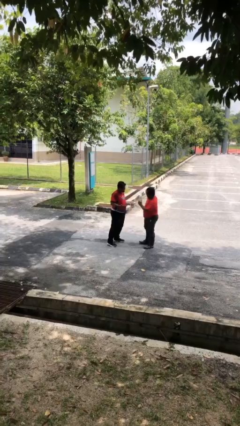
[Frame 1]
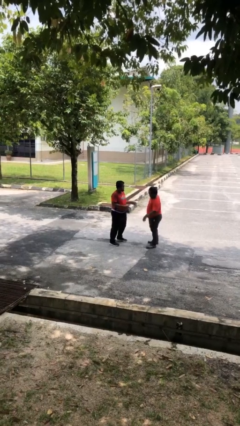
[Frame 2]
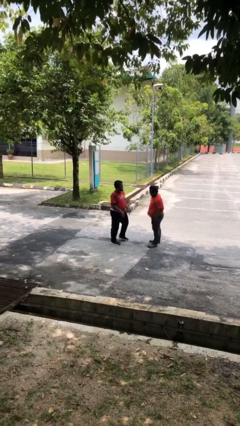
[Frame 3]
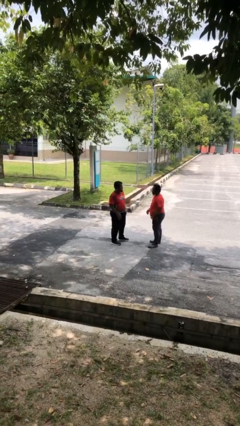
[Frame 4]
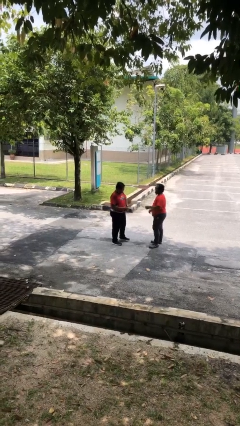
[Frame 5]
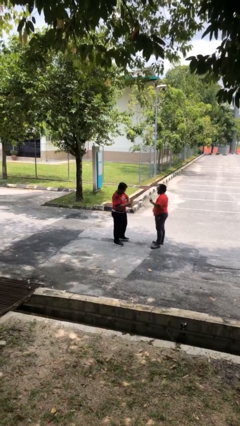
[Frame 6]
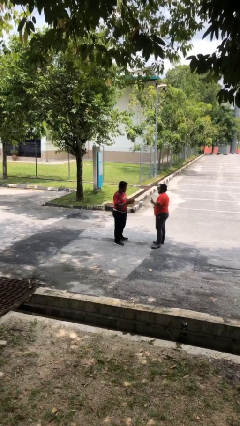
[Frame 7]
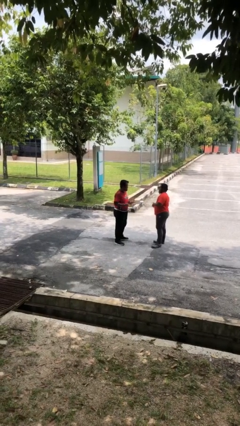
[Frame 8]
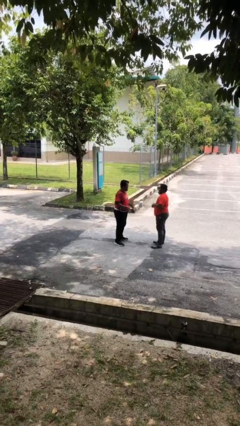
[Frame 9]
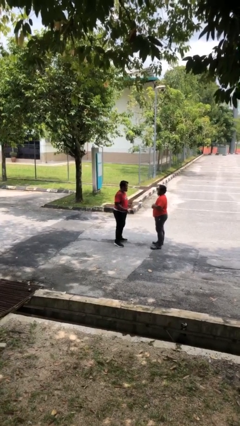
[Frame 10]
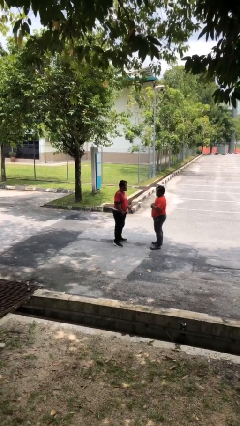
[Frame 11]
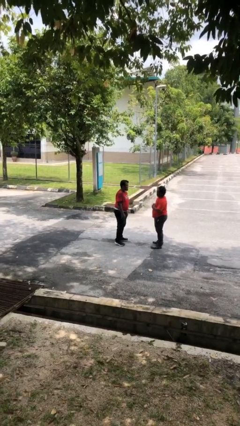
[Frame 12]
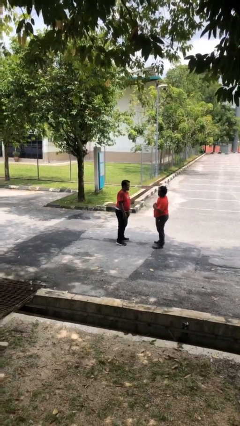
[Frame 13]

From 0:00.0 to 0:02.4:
person talks to person

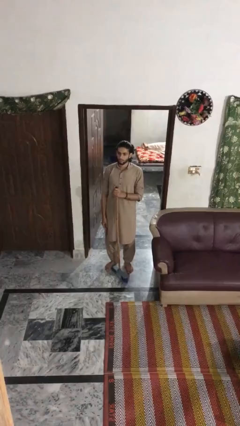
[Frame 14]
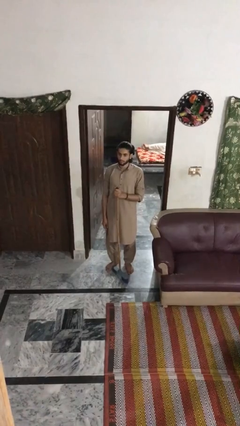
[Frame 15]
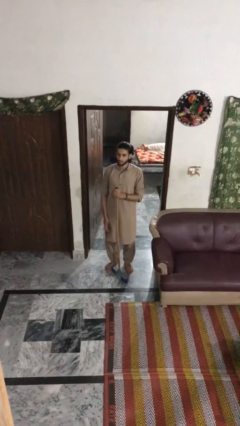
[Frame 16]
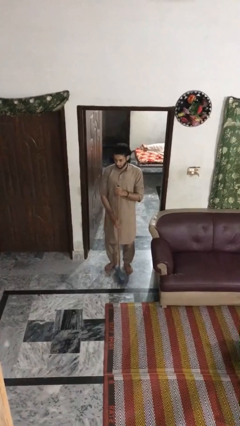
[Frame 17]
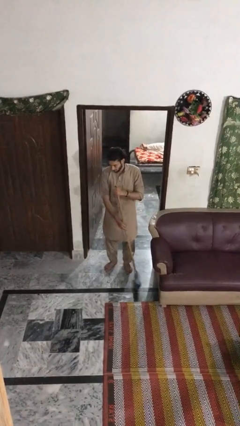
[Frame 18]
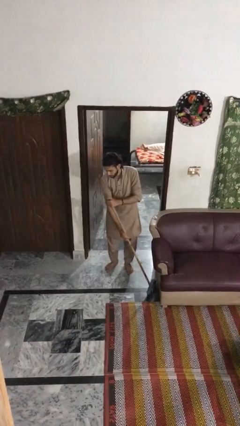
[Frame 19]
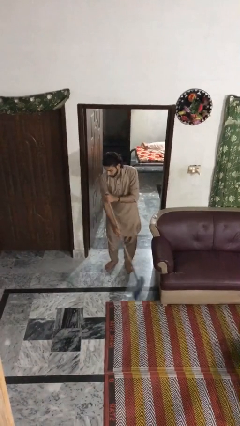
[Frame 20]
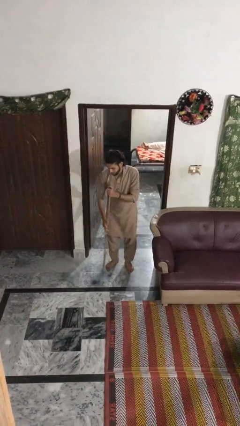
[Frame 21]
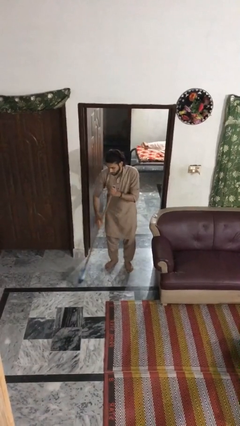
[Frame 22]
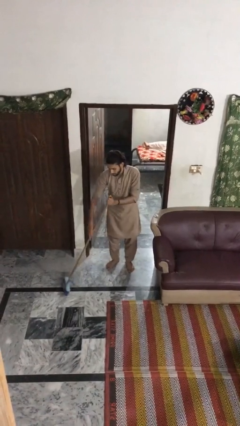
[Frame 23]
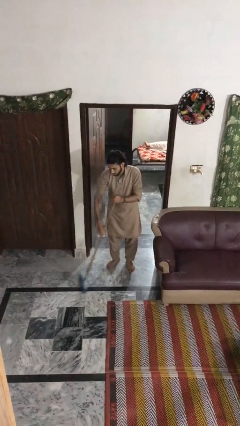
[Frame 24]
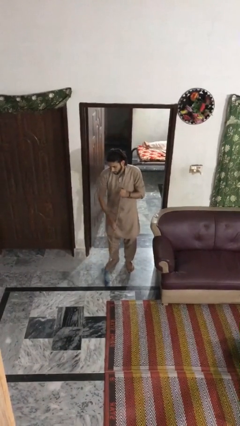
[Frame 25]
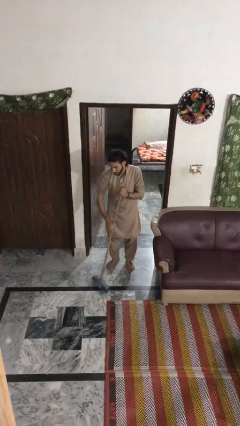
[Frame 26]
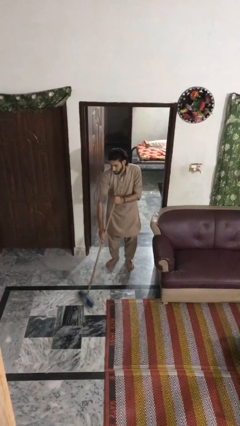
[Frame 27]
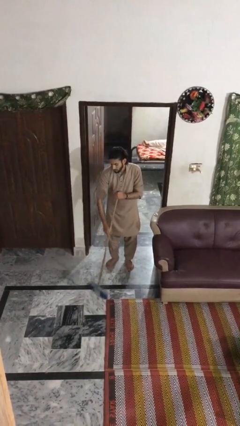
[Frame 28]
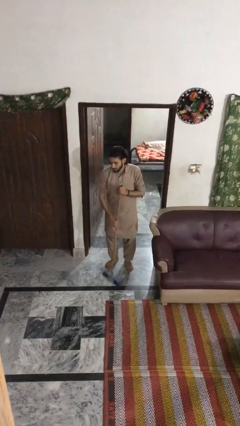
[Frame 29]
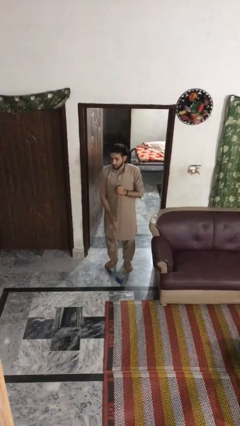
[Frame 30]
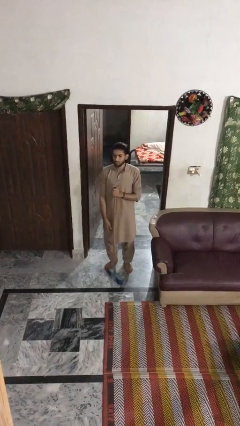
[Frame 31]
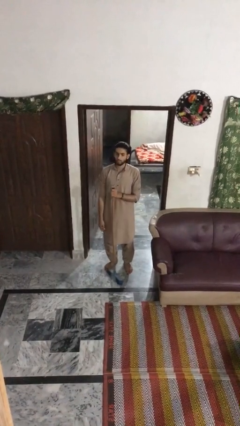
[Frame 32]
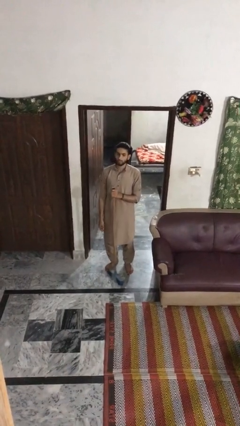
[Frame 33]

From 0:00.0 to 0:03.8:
person sweeps floor

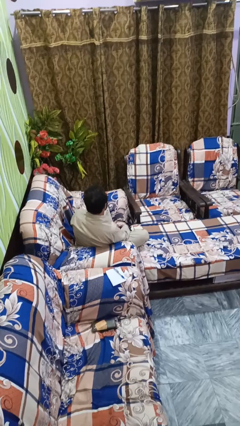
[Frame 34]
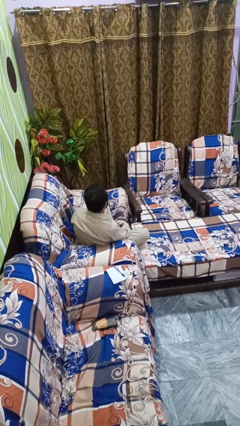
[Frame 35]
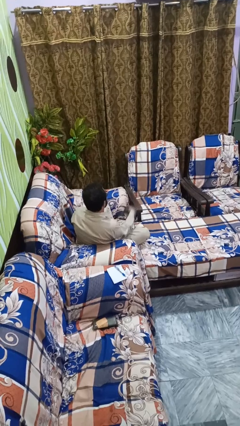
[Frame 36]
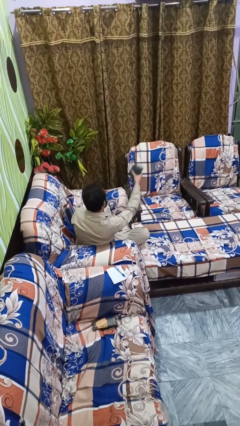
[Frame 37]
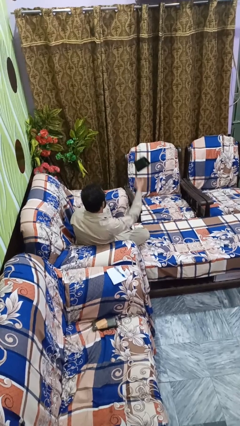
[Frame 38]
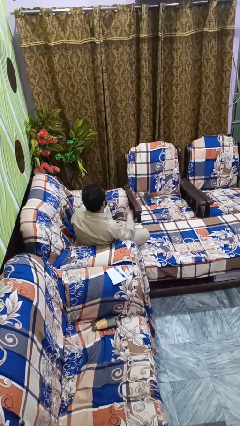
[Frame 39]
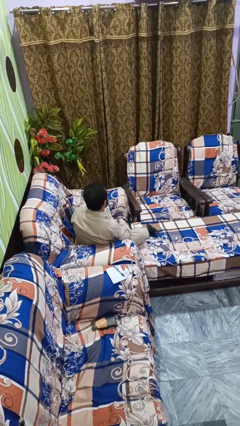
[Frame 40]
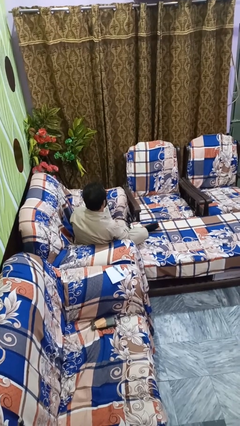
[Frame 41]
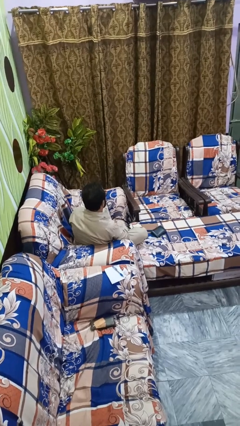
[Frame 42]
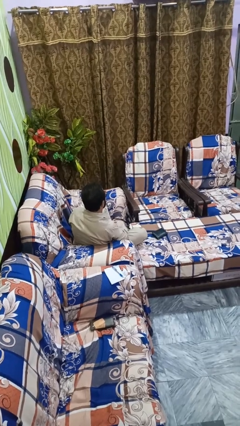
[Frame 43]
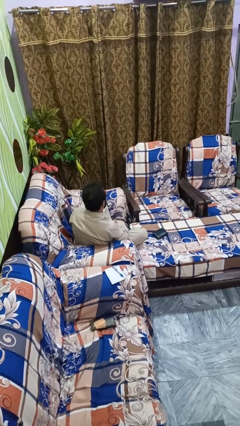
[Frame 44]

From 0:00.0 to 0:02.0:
person throws object into air

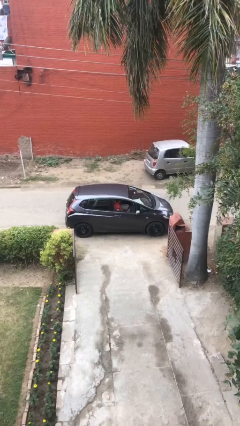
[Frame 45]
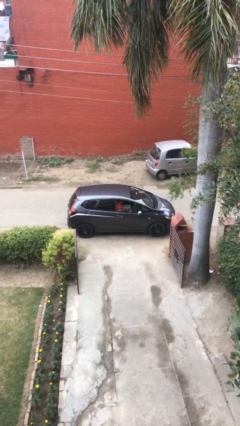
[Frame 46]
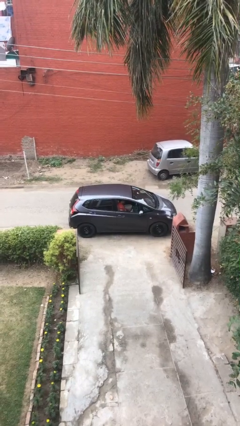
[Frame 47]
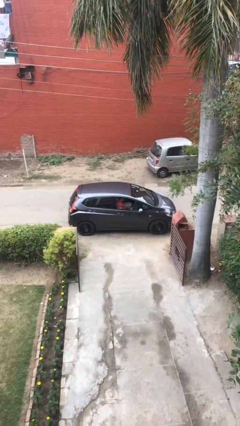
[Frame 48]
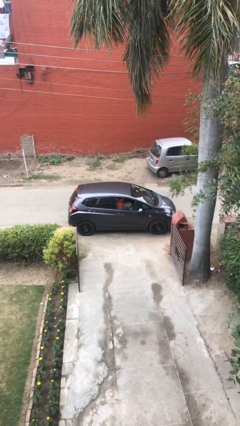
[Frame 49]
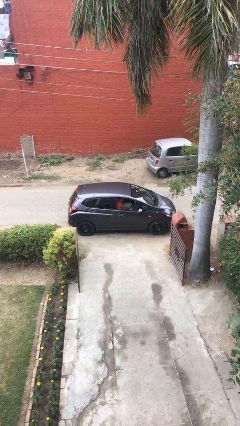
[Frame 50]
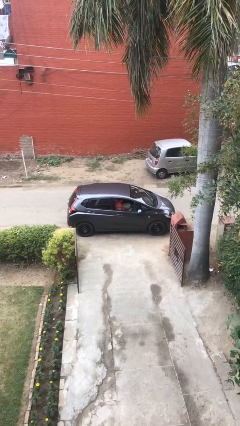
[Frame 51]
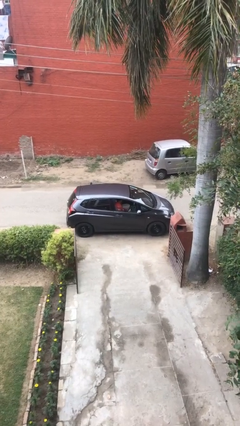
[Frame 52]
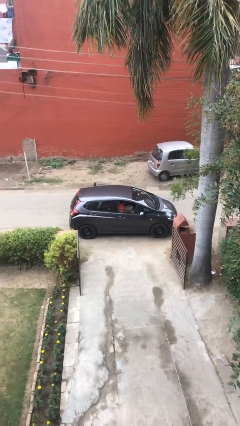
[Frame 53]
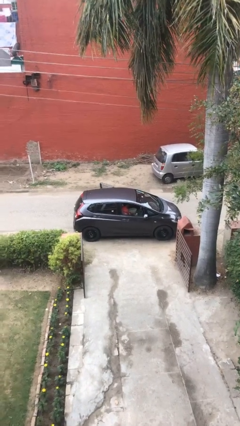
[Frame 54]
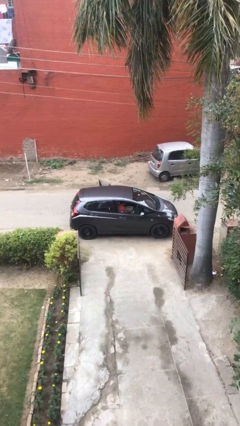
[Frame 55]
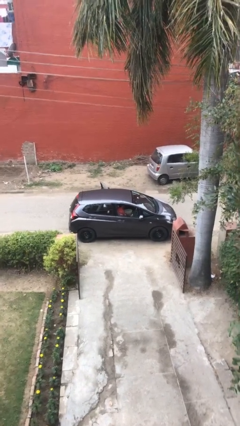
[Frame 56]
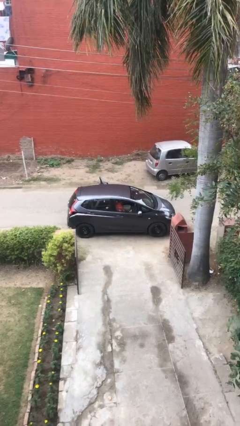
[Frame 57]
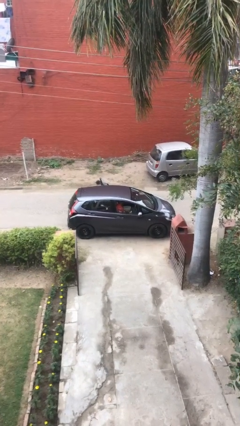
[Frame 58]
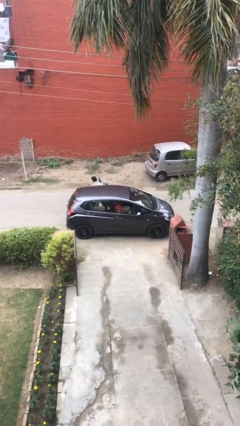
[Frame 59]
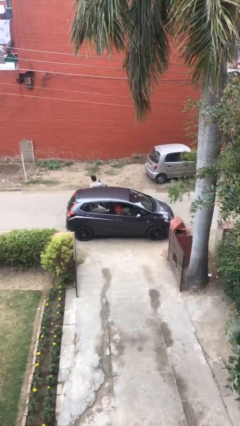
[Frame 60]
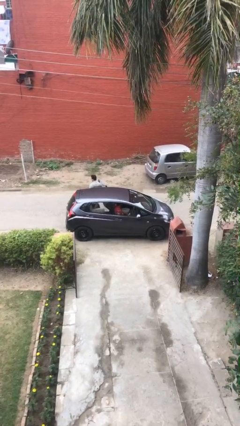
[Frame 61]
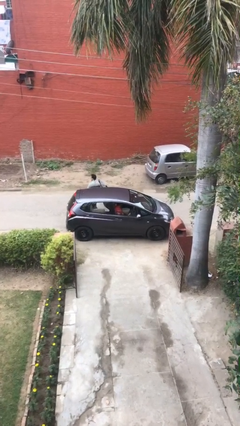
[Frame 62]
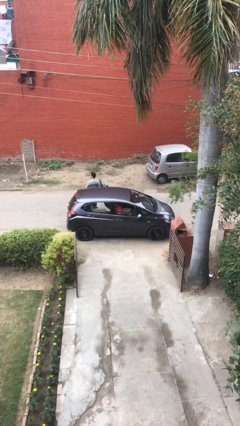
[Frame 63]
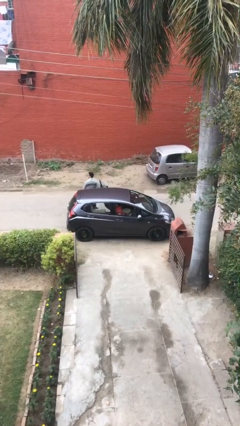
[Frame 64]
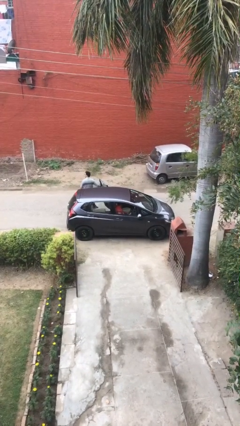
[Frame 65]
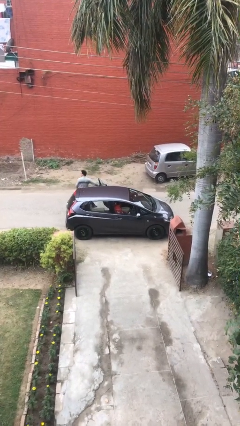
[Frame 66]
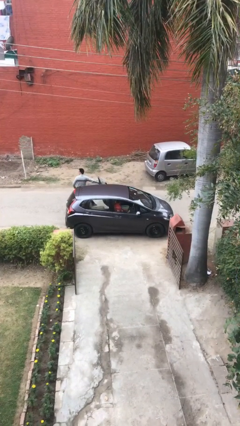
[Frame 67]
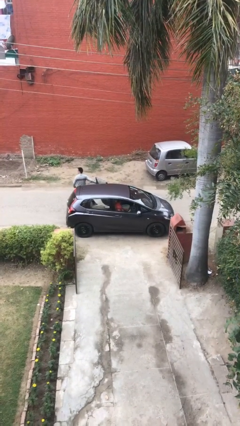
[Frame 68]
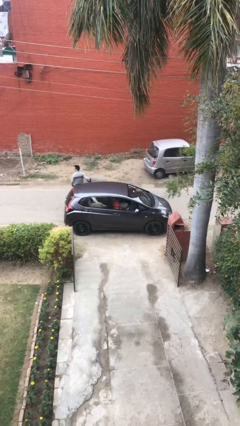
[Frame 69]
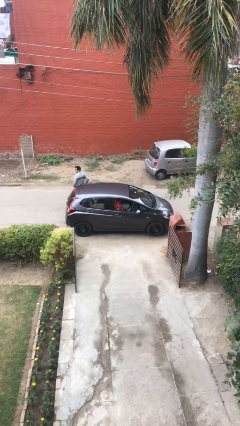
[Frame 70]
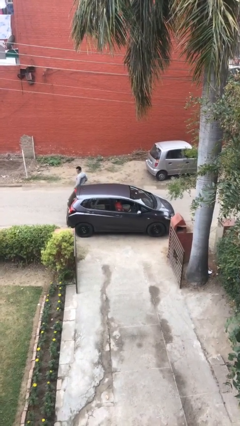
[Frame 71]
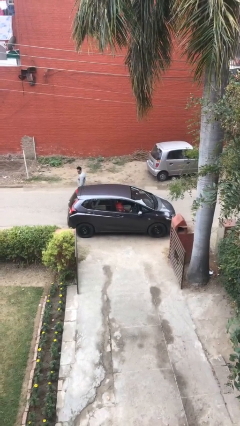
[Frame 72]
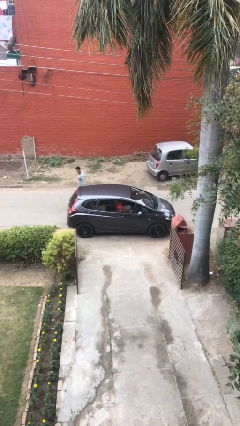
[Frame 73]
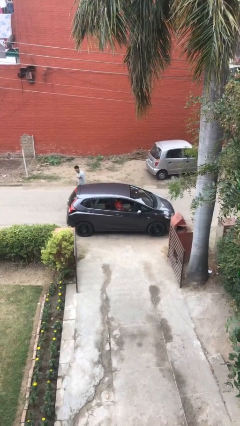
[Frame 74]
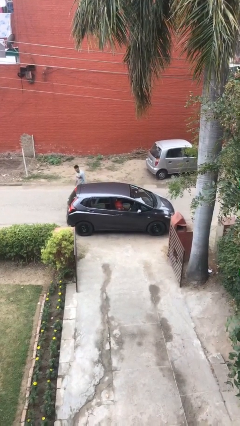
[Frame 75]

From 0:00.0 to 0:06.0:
car drops off person

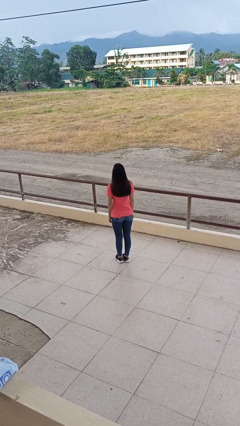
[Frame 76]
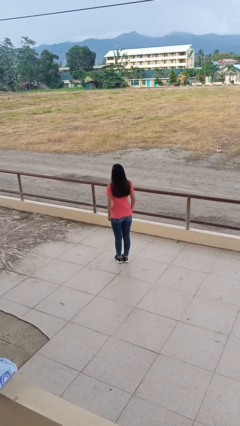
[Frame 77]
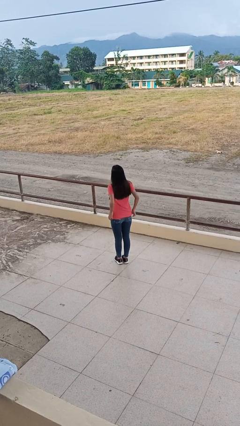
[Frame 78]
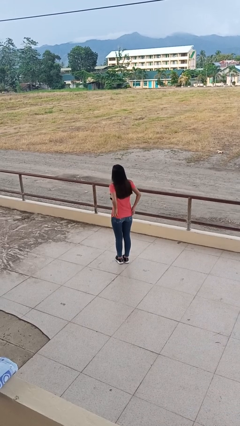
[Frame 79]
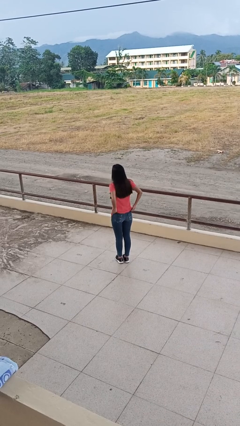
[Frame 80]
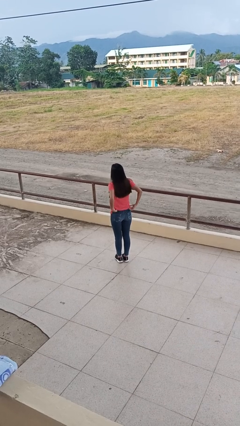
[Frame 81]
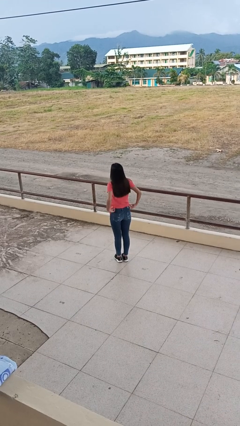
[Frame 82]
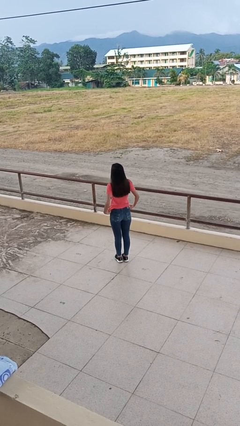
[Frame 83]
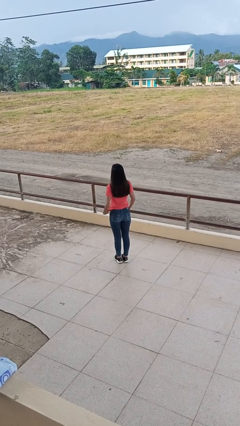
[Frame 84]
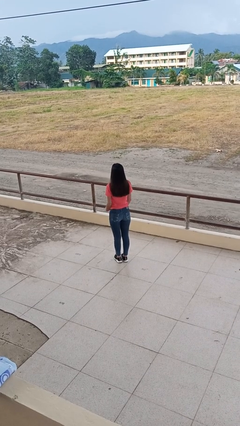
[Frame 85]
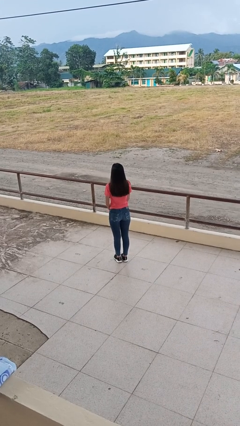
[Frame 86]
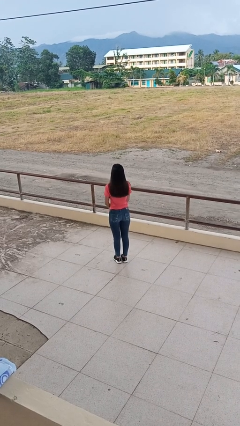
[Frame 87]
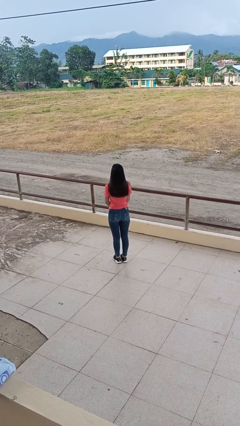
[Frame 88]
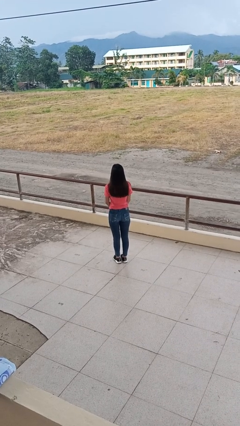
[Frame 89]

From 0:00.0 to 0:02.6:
person tucks in shirt

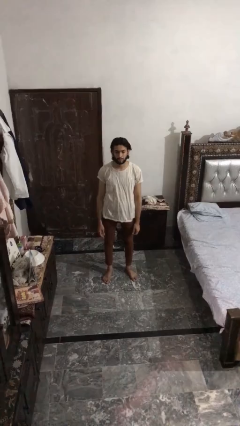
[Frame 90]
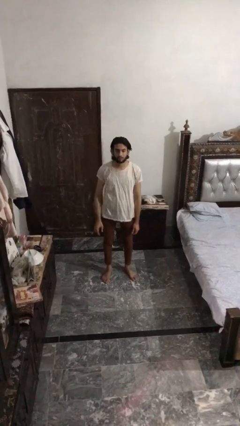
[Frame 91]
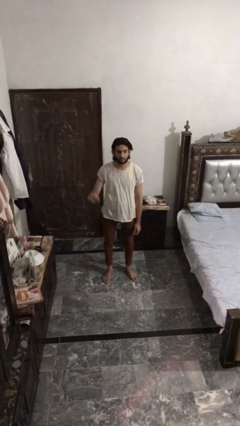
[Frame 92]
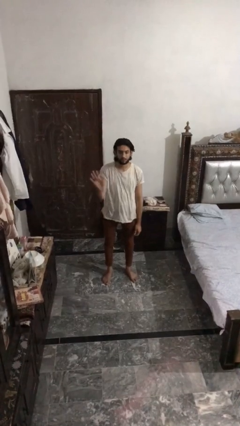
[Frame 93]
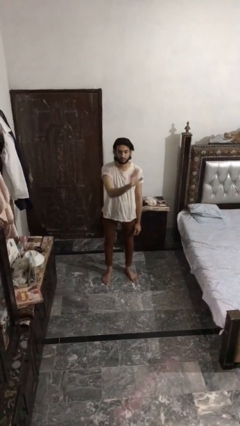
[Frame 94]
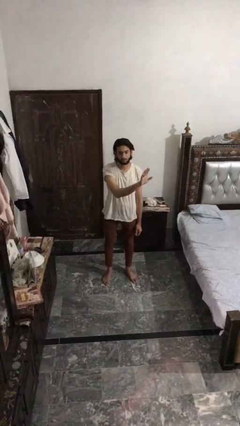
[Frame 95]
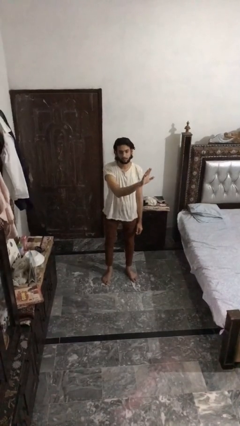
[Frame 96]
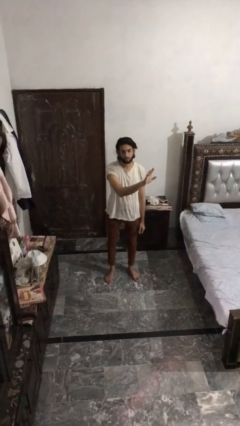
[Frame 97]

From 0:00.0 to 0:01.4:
person gestures swipe left
